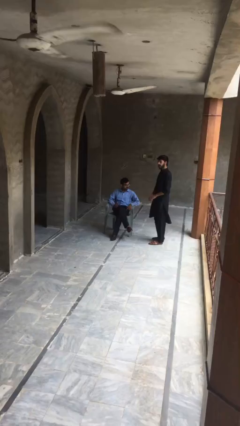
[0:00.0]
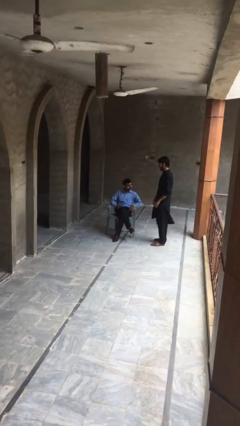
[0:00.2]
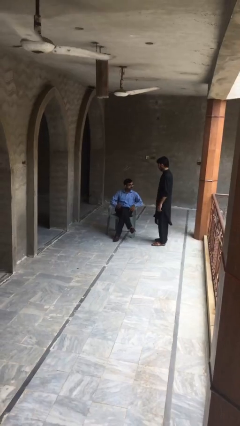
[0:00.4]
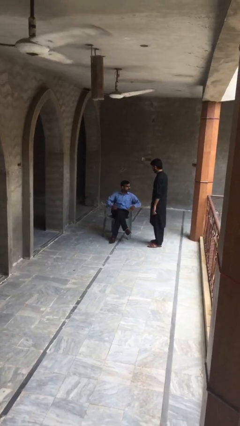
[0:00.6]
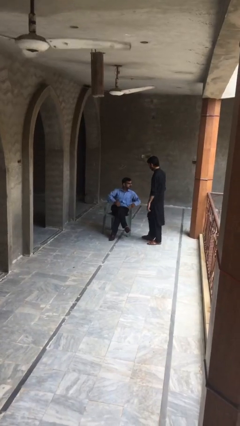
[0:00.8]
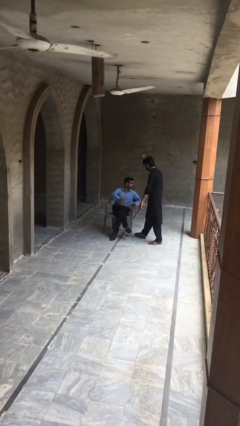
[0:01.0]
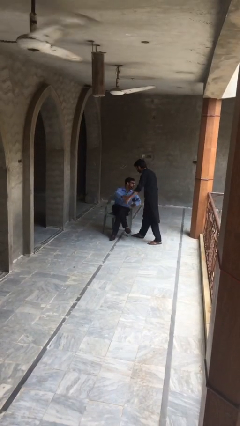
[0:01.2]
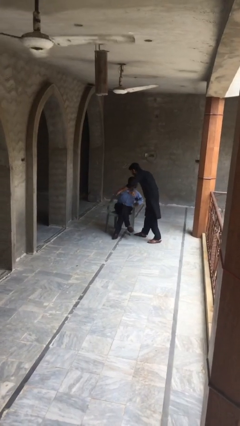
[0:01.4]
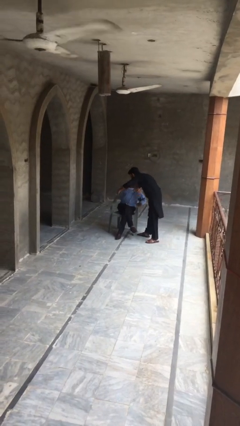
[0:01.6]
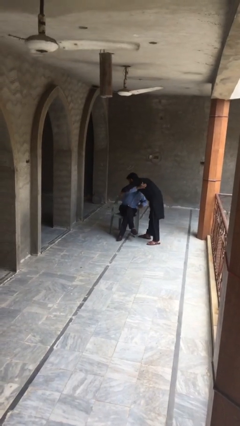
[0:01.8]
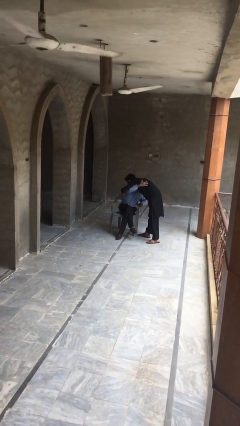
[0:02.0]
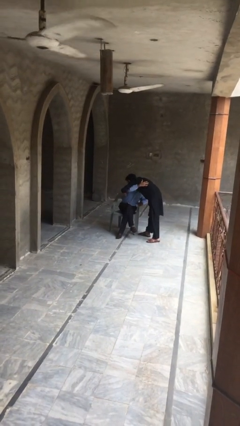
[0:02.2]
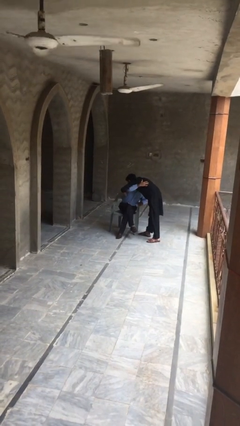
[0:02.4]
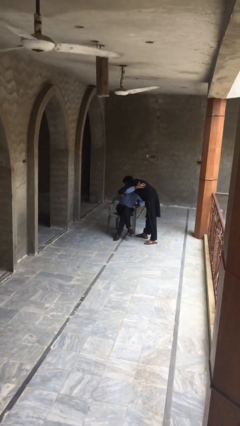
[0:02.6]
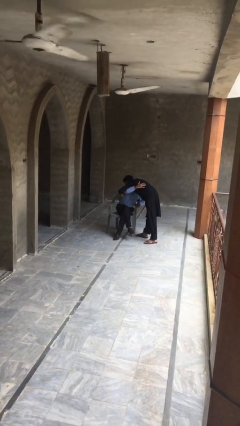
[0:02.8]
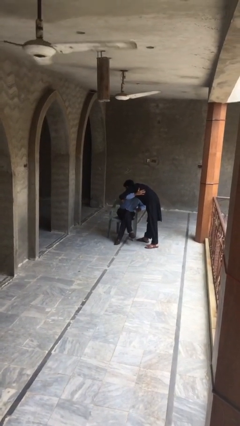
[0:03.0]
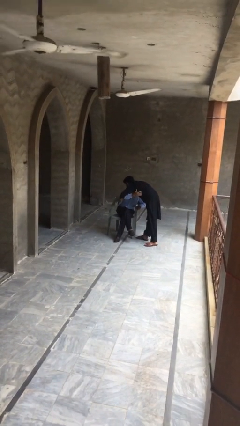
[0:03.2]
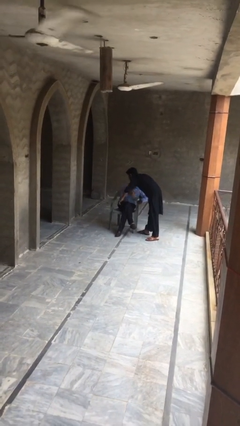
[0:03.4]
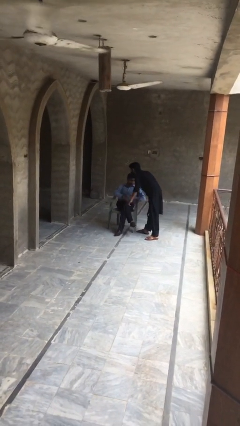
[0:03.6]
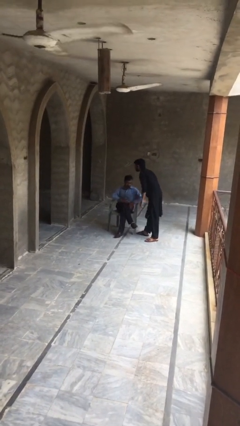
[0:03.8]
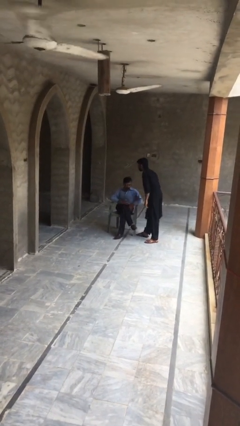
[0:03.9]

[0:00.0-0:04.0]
person embraces person

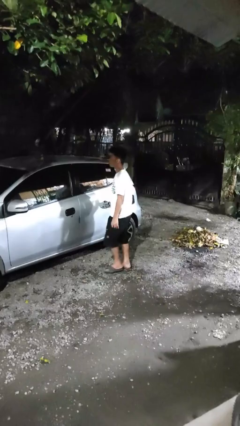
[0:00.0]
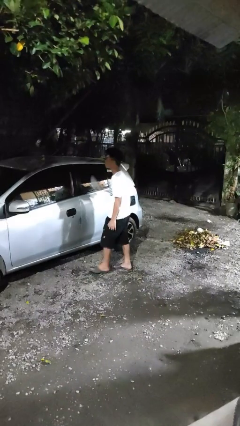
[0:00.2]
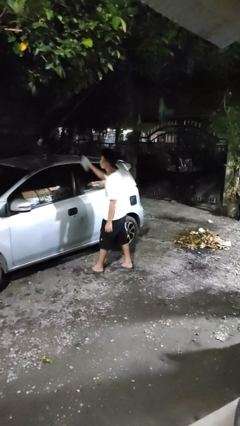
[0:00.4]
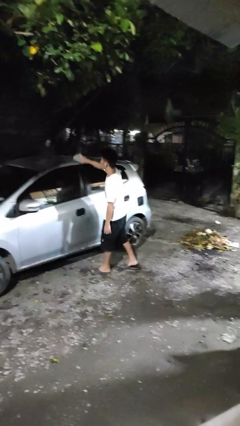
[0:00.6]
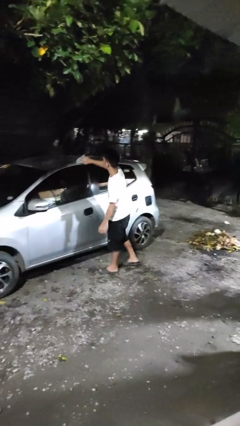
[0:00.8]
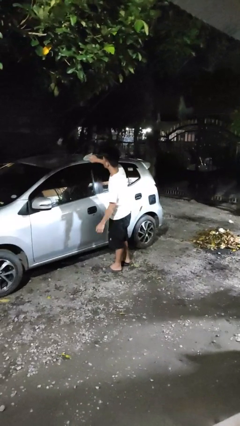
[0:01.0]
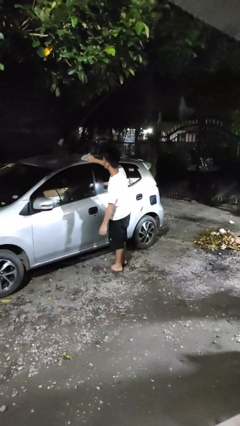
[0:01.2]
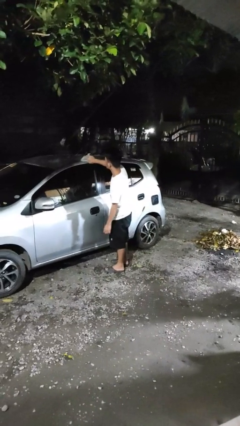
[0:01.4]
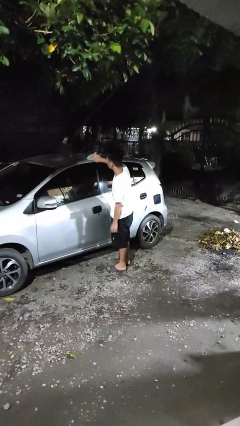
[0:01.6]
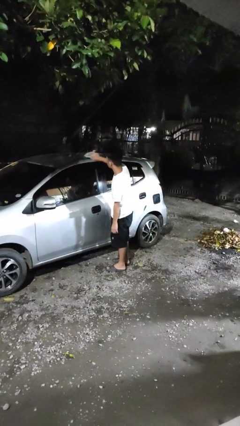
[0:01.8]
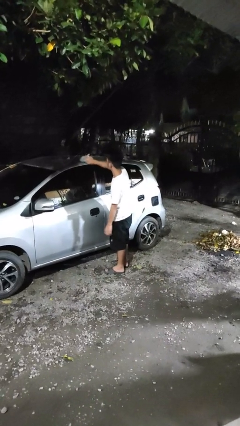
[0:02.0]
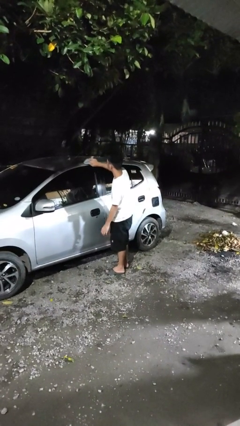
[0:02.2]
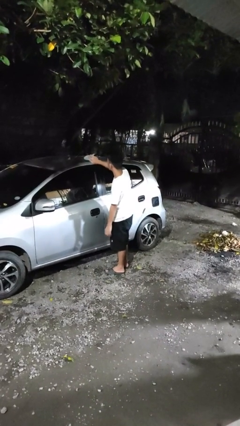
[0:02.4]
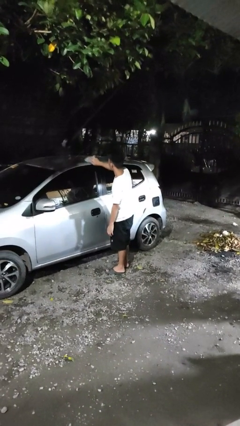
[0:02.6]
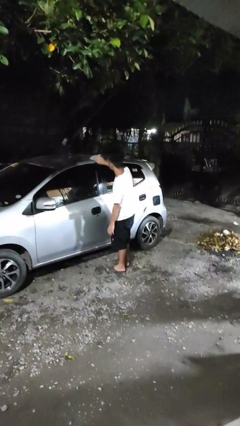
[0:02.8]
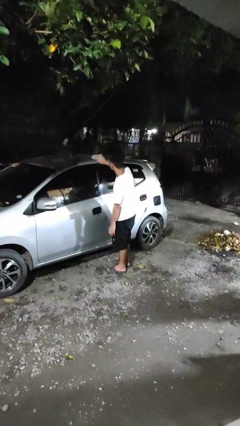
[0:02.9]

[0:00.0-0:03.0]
person polishes car with rag

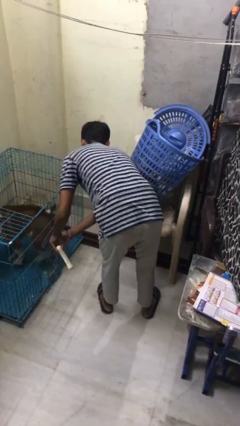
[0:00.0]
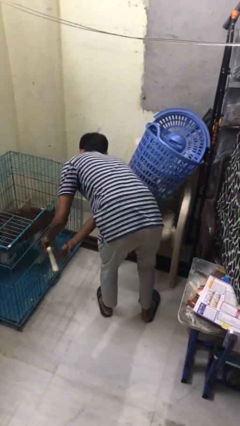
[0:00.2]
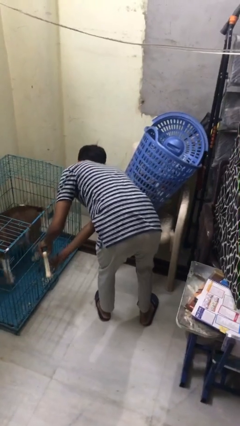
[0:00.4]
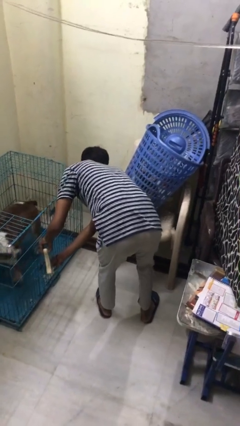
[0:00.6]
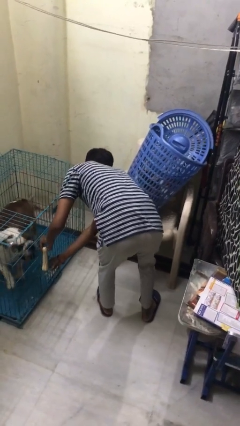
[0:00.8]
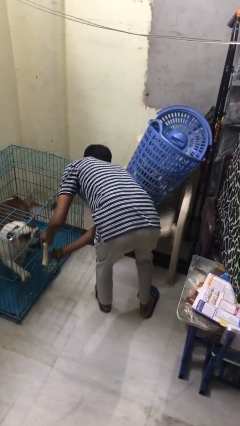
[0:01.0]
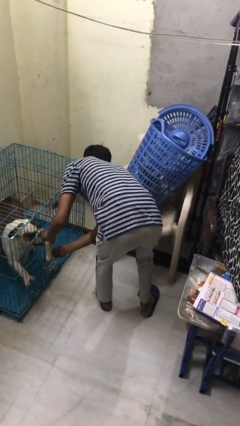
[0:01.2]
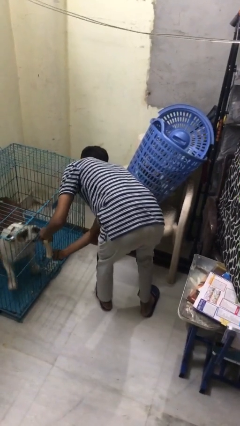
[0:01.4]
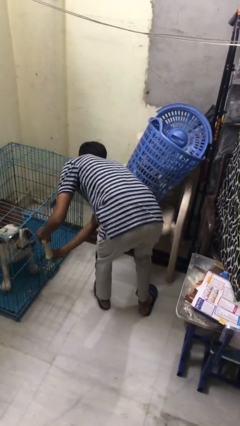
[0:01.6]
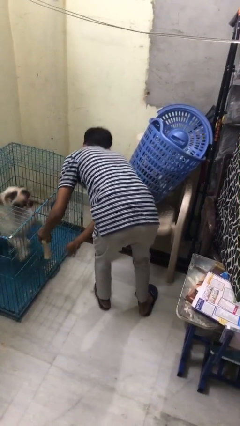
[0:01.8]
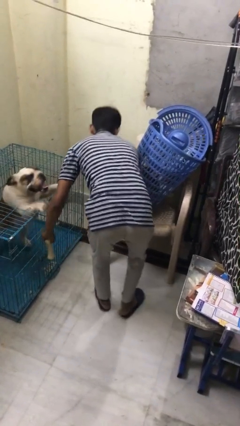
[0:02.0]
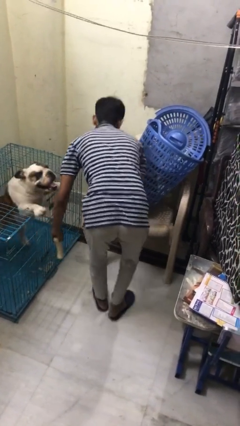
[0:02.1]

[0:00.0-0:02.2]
person crates dog

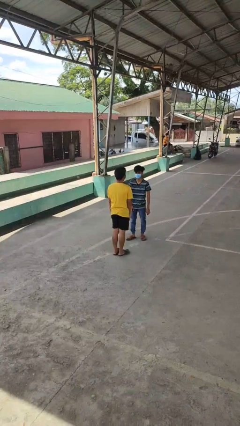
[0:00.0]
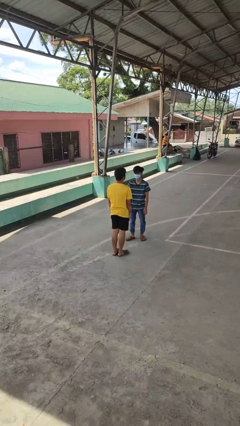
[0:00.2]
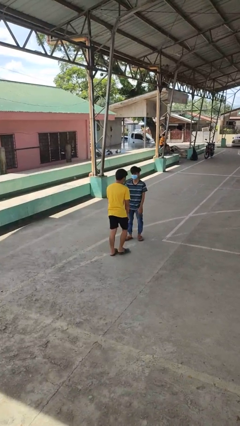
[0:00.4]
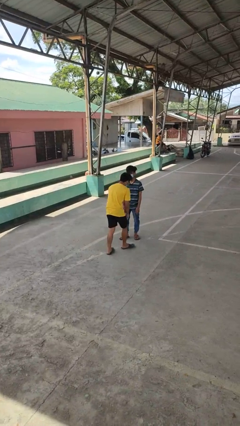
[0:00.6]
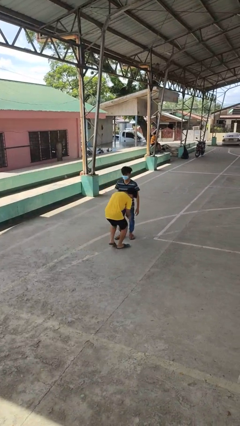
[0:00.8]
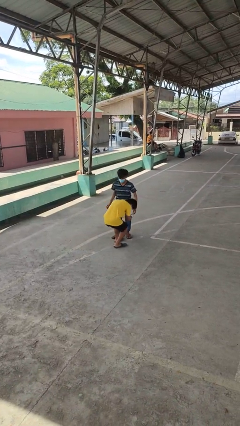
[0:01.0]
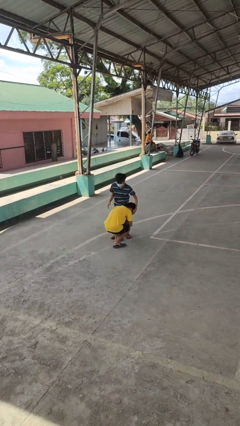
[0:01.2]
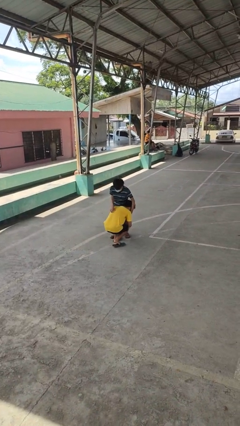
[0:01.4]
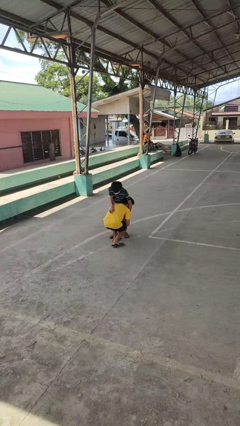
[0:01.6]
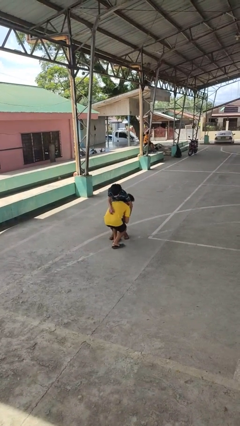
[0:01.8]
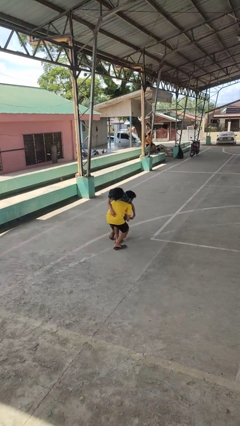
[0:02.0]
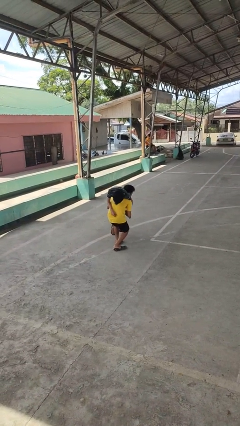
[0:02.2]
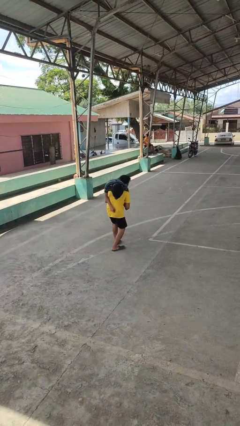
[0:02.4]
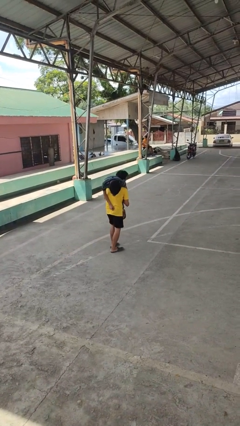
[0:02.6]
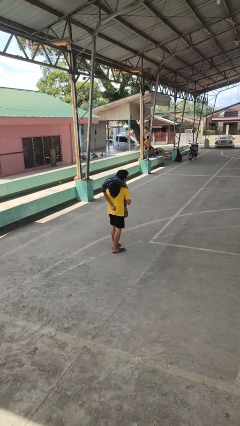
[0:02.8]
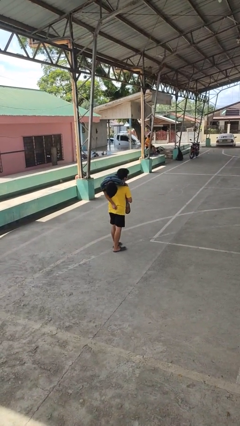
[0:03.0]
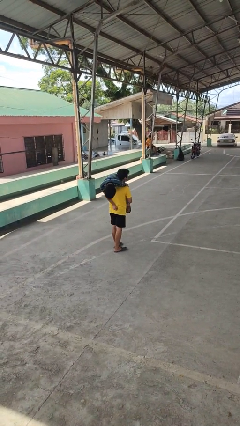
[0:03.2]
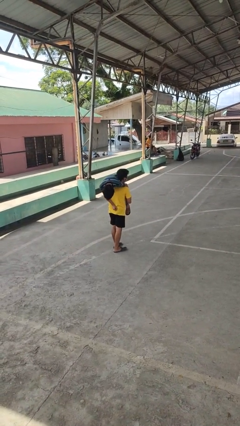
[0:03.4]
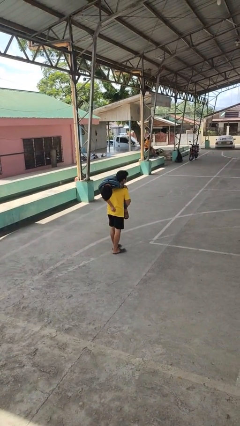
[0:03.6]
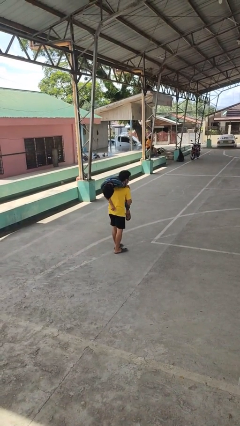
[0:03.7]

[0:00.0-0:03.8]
person carries person over shoulder

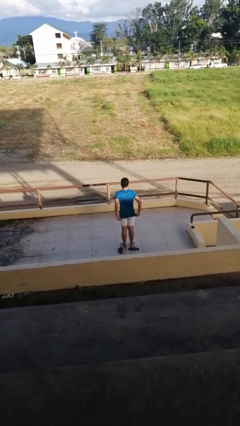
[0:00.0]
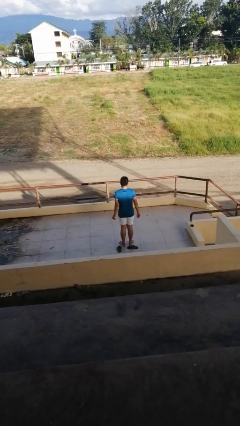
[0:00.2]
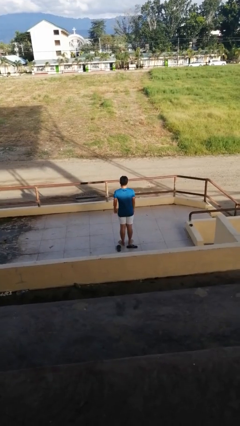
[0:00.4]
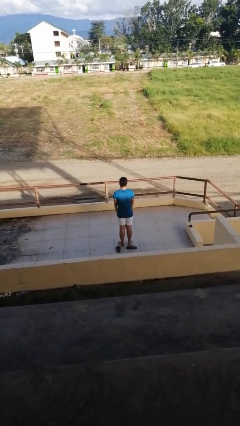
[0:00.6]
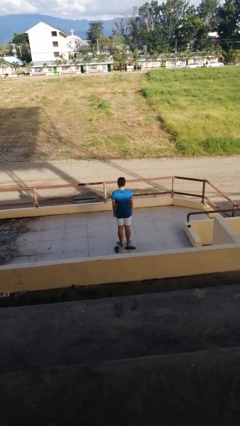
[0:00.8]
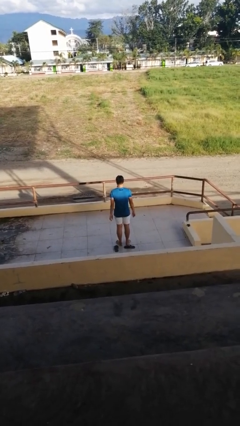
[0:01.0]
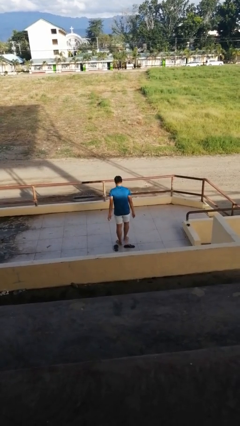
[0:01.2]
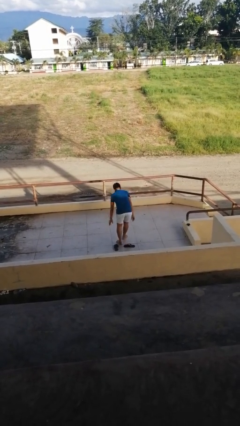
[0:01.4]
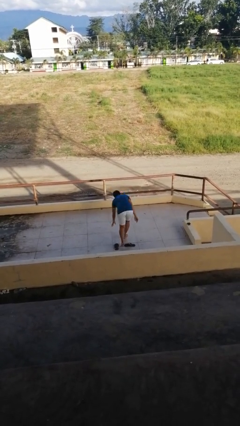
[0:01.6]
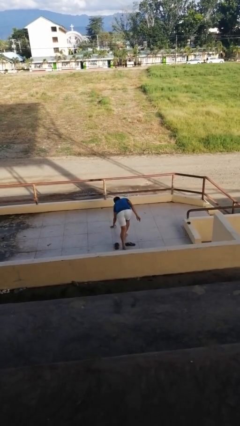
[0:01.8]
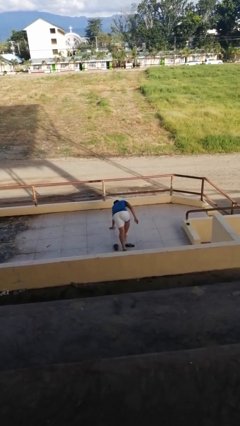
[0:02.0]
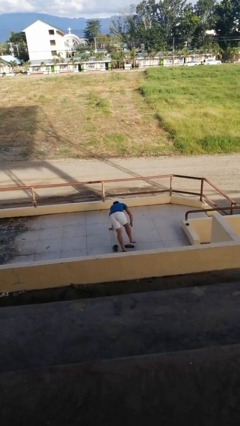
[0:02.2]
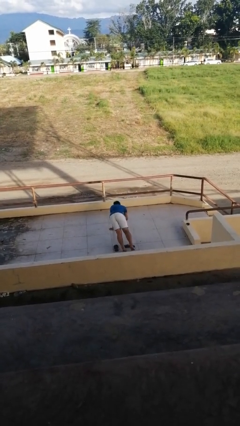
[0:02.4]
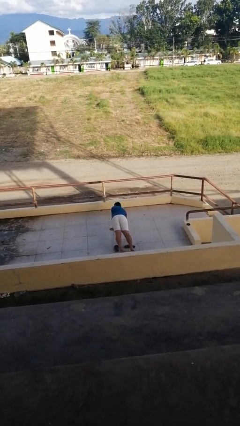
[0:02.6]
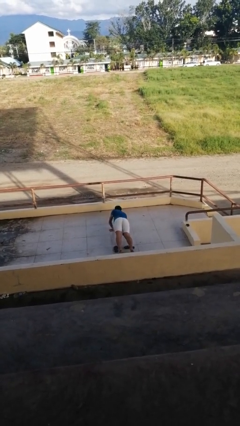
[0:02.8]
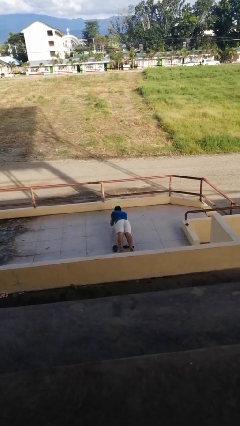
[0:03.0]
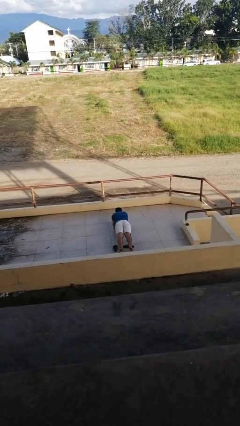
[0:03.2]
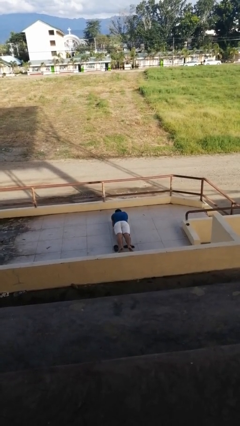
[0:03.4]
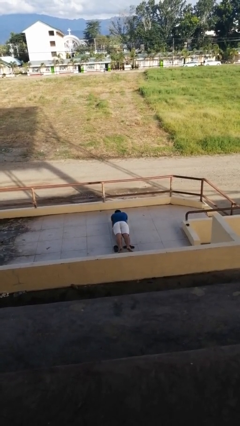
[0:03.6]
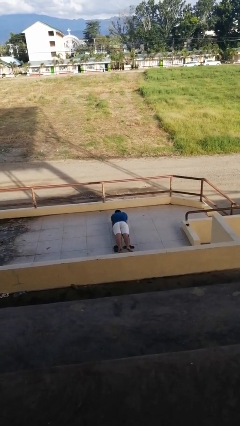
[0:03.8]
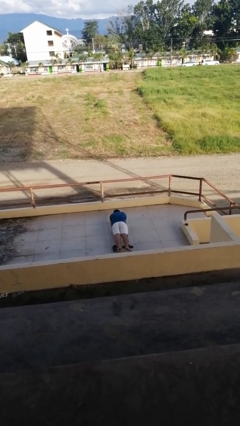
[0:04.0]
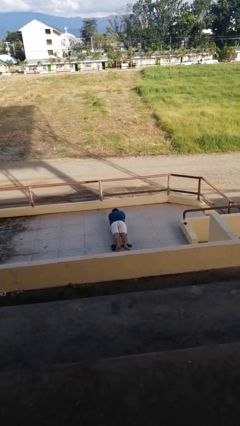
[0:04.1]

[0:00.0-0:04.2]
person exercises with plank
